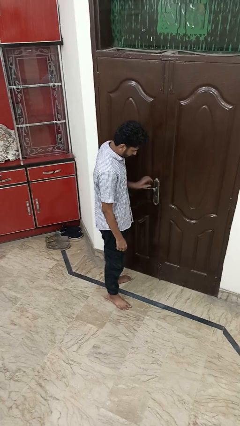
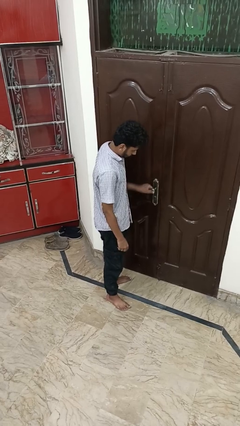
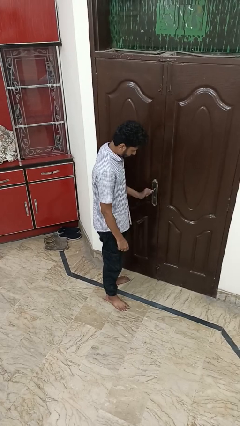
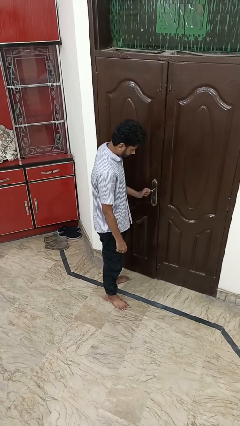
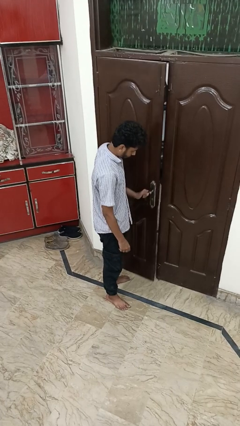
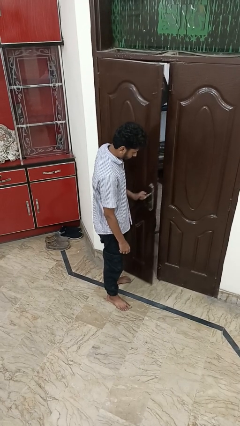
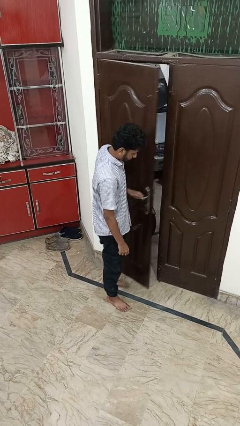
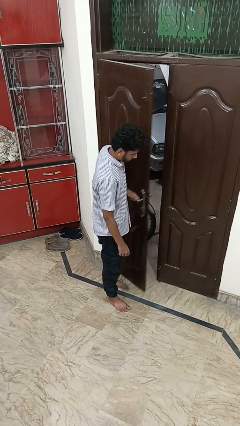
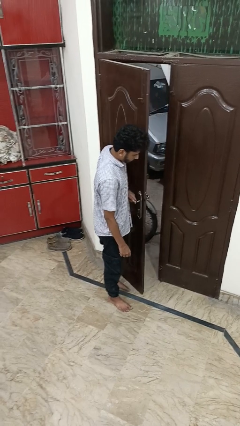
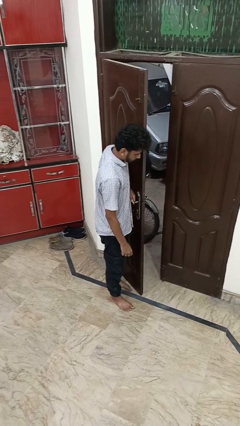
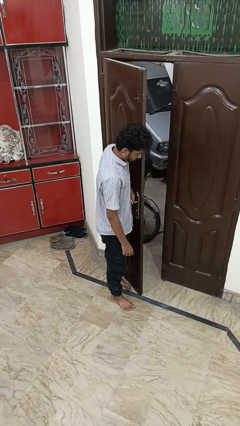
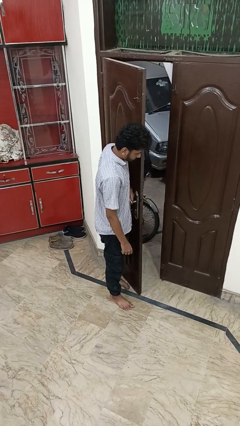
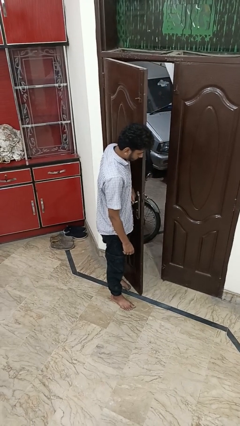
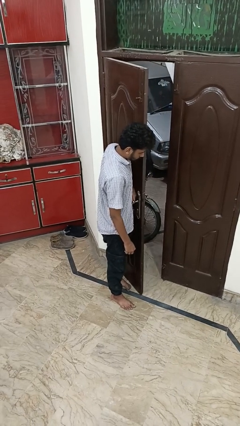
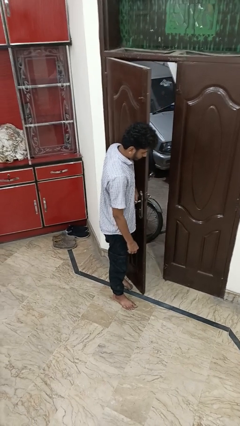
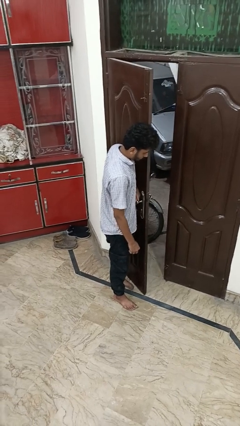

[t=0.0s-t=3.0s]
person opens facility door

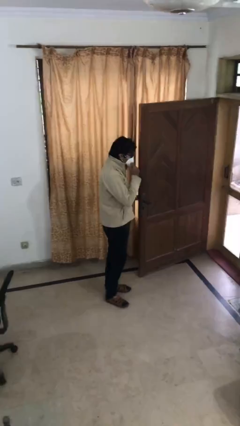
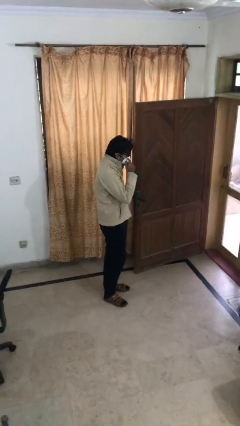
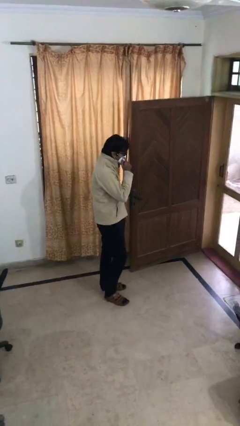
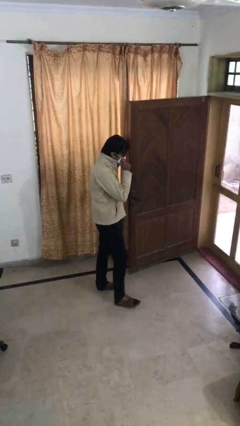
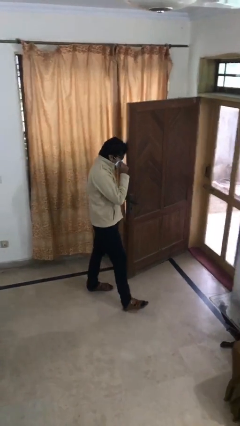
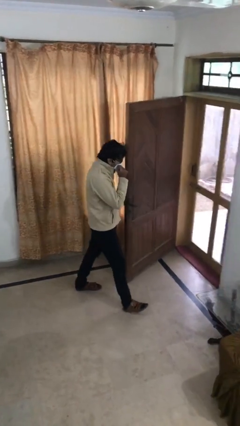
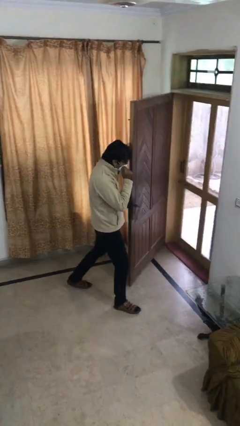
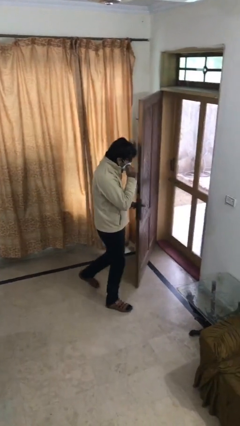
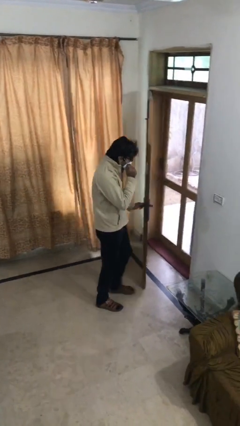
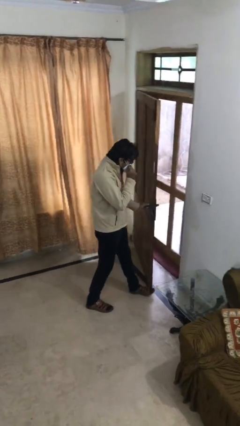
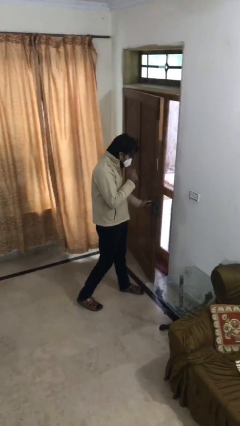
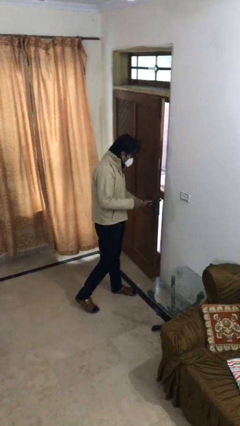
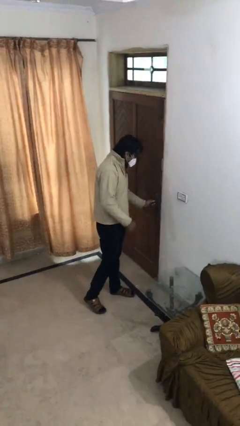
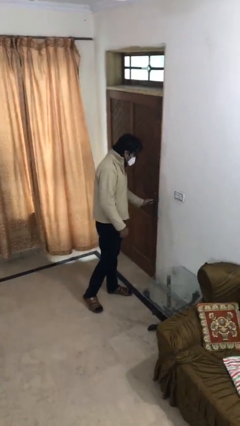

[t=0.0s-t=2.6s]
person closes facility door

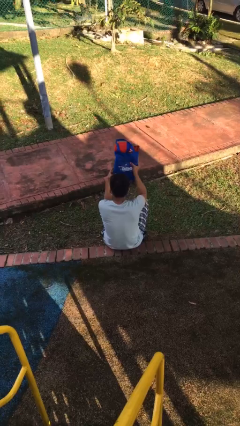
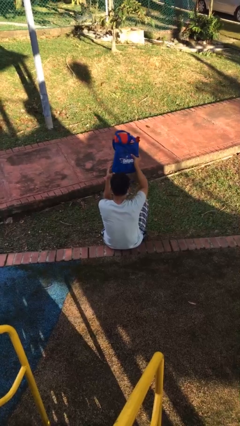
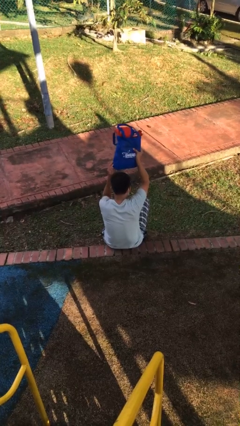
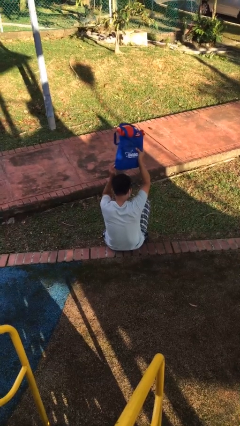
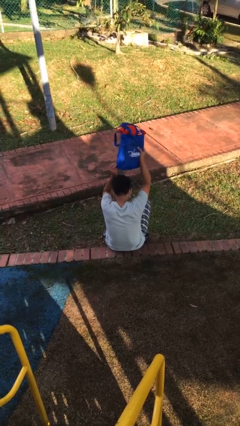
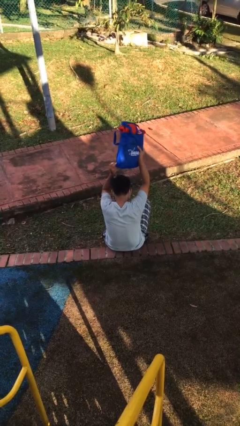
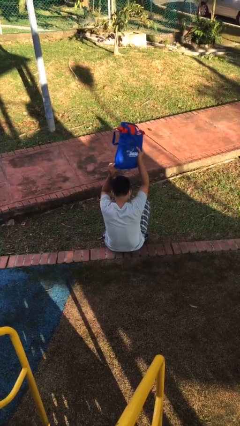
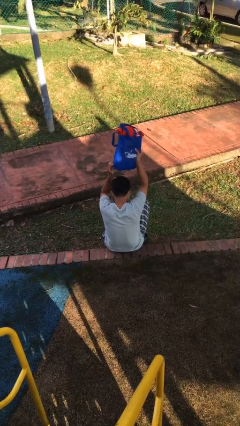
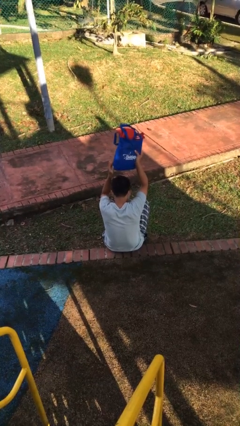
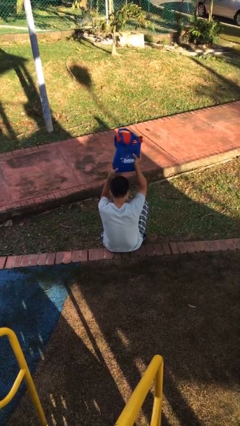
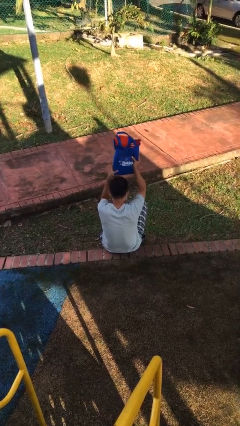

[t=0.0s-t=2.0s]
person holds object above head

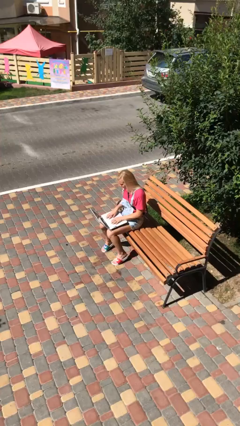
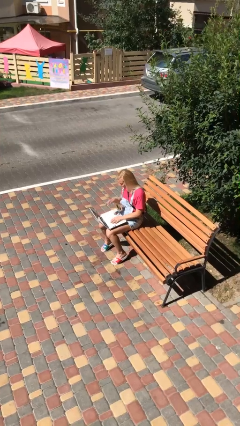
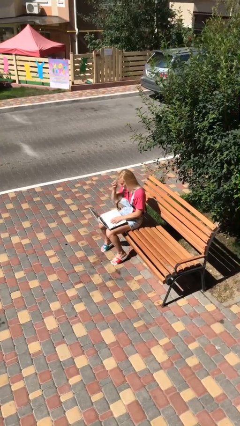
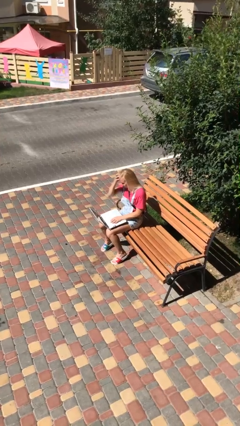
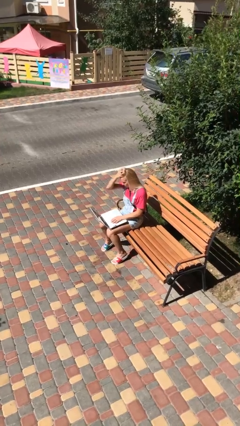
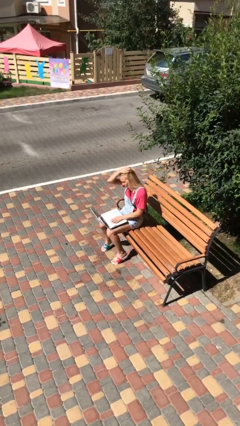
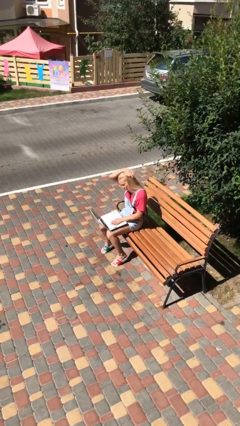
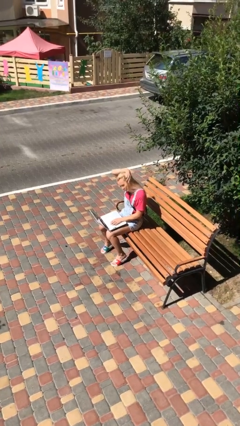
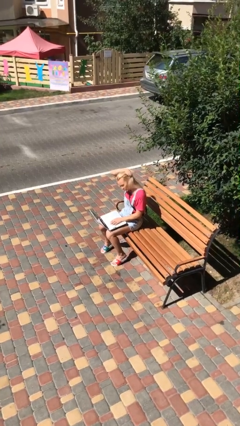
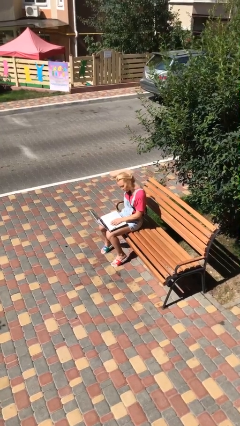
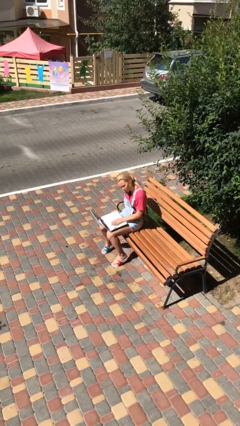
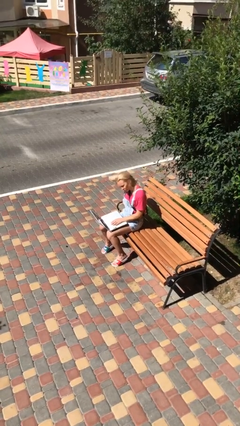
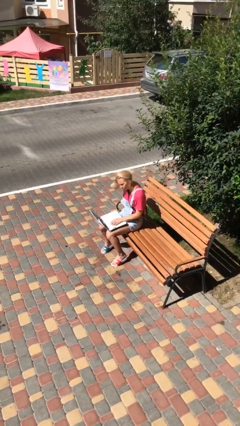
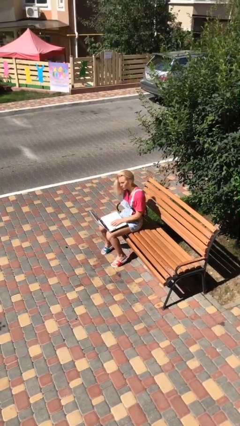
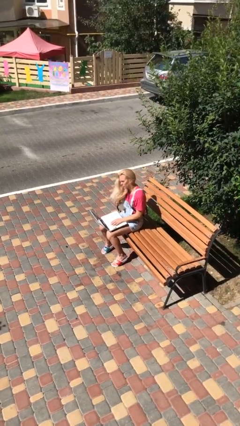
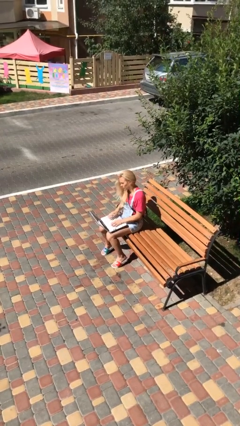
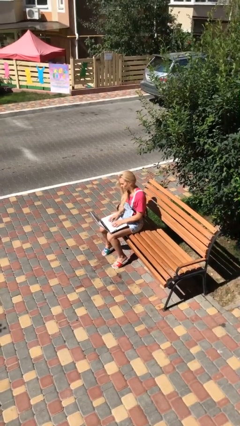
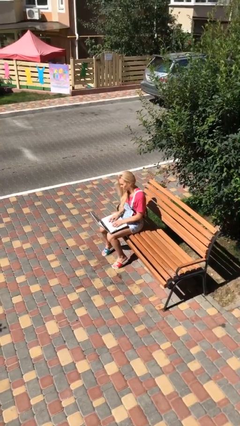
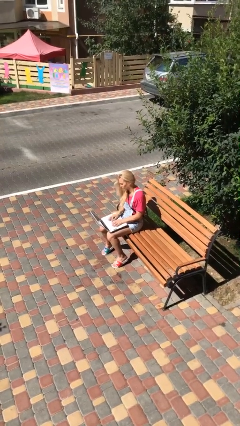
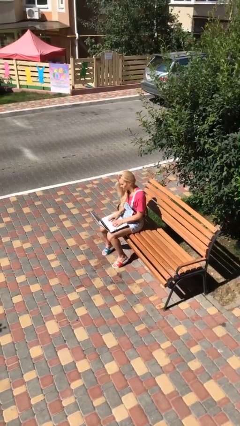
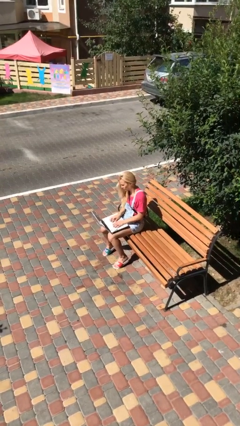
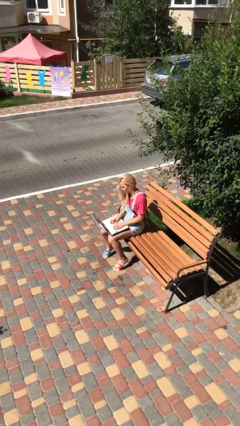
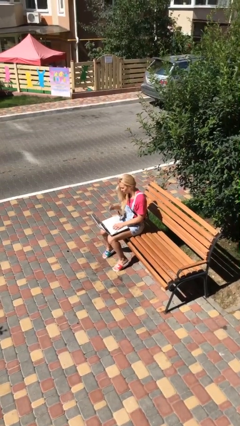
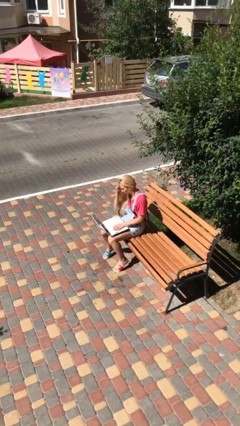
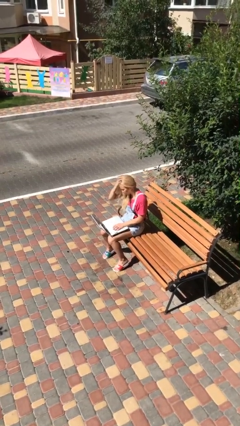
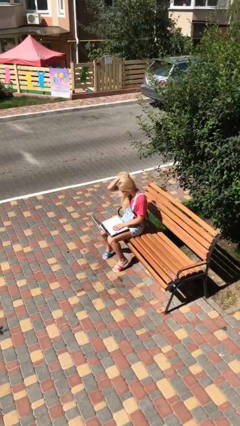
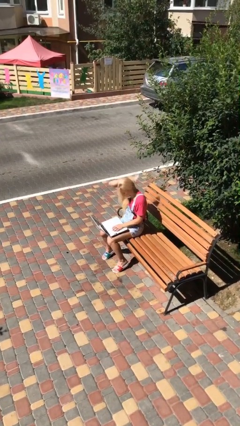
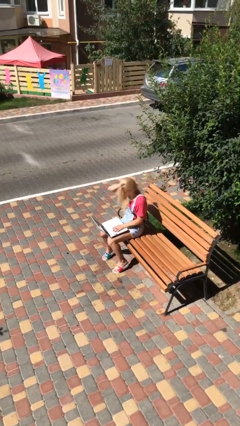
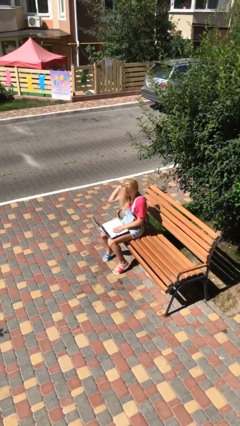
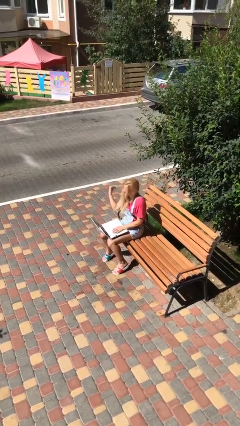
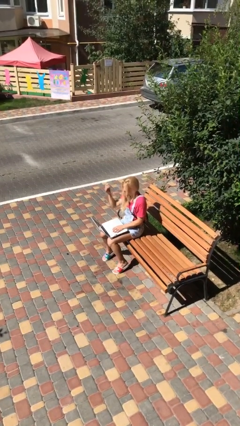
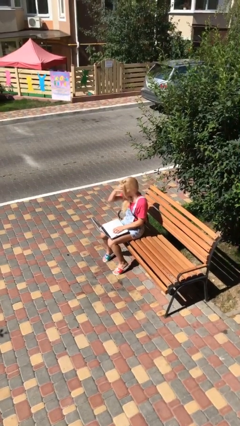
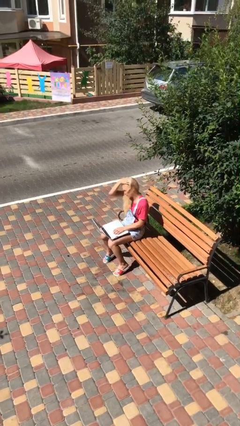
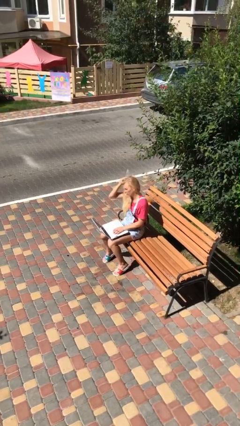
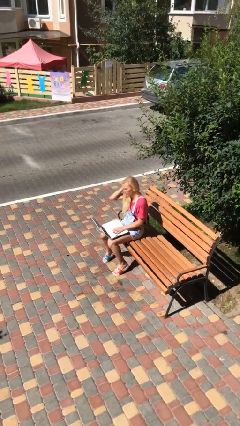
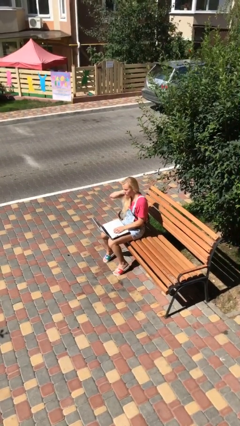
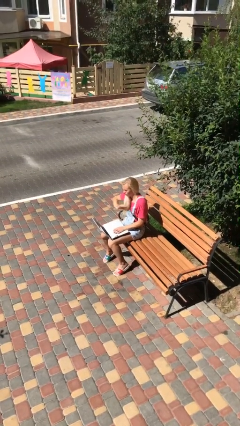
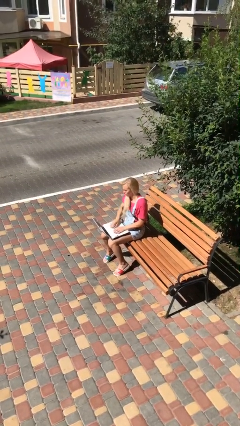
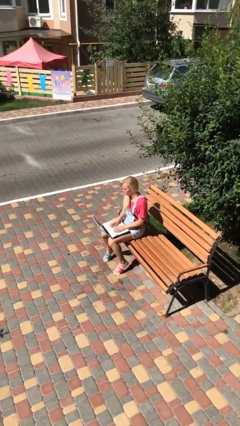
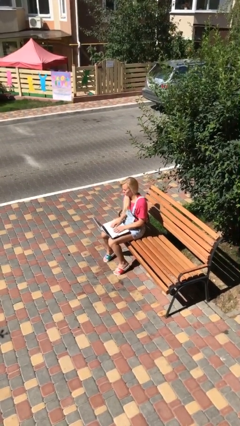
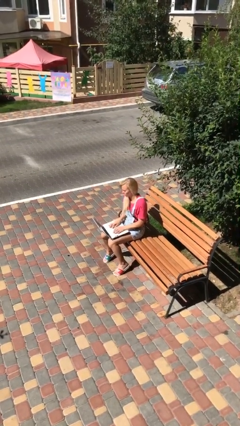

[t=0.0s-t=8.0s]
person interacts with laptop

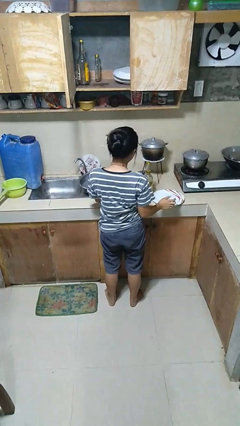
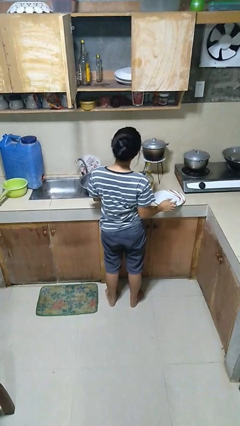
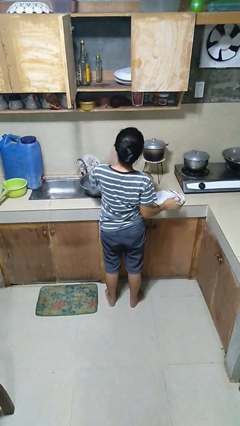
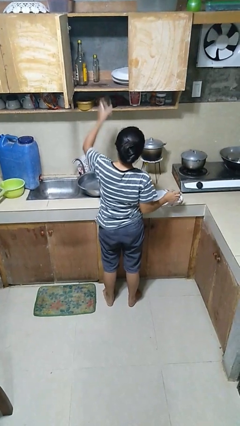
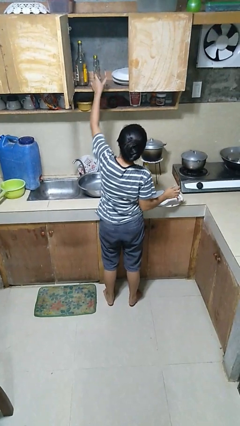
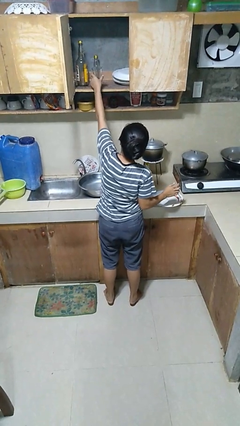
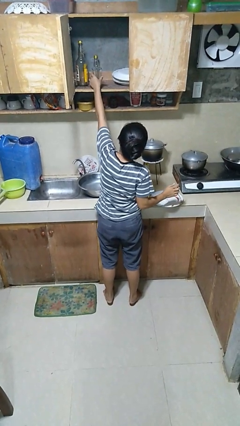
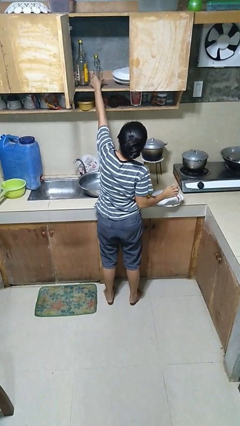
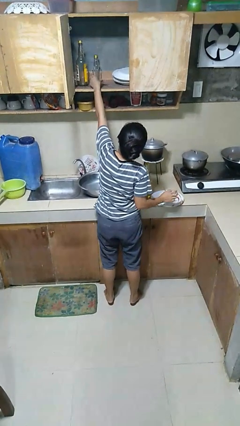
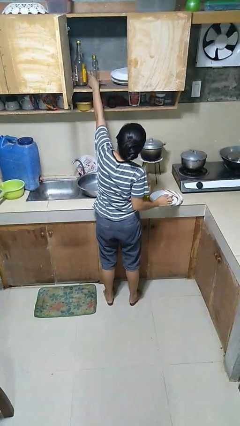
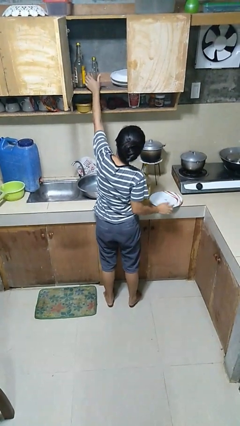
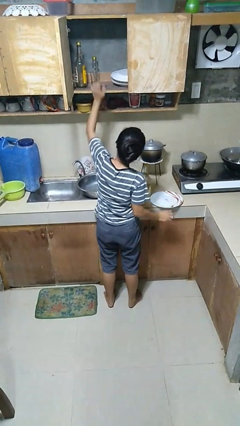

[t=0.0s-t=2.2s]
person puts object in cabinet
